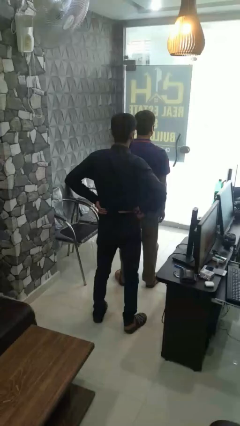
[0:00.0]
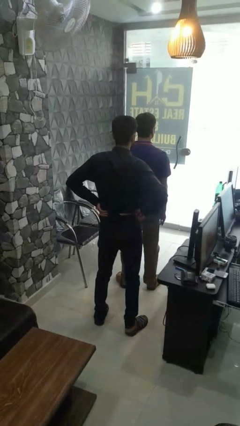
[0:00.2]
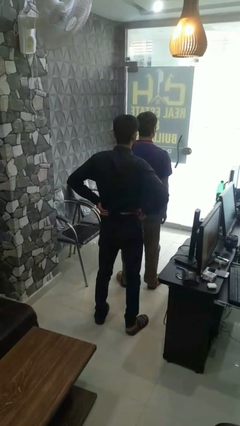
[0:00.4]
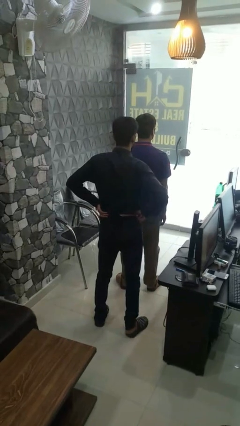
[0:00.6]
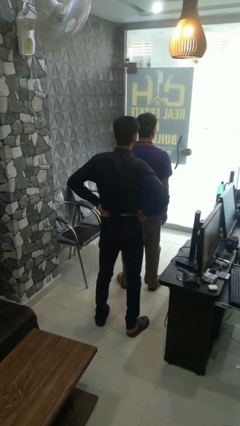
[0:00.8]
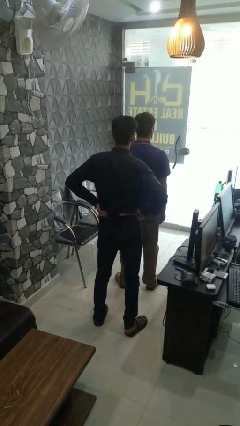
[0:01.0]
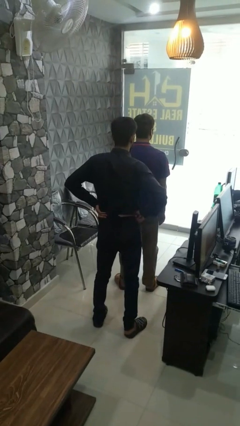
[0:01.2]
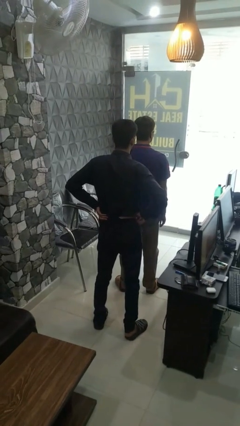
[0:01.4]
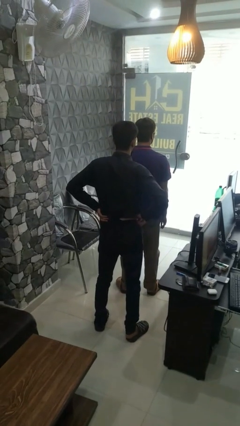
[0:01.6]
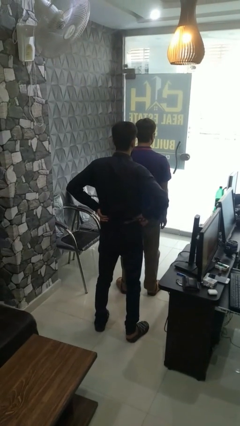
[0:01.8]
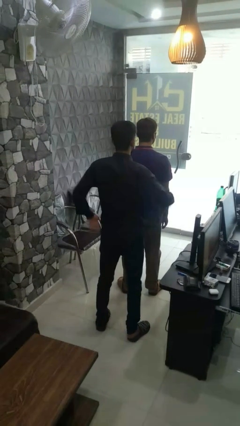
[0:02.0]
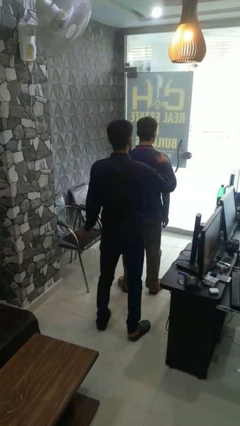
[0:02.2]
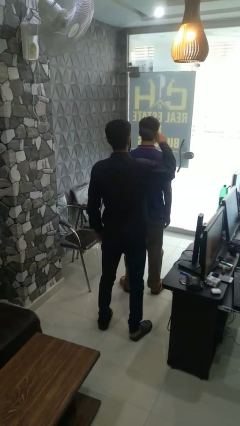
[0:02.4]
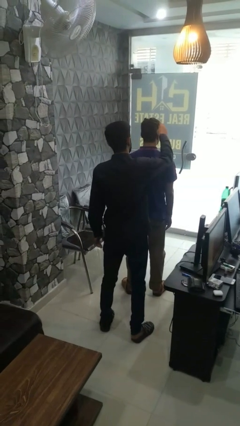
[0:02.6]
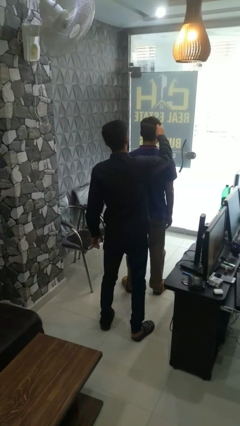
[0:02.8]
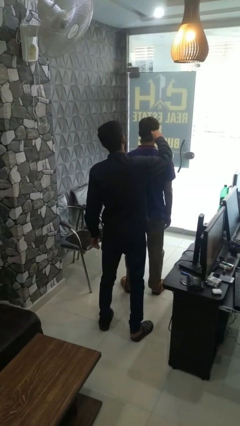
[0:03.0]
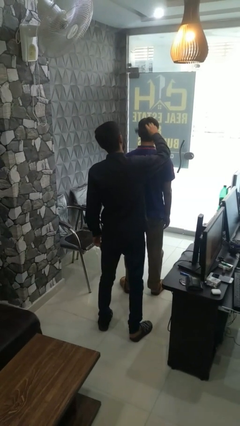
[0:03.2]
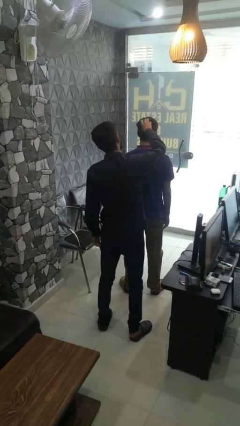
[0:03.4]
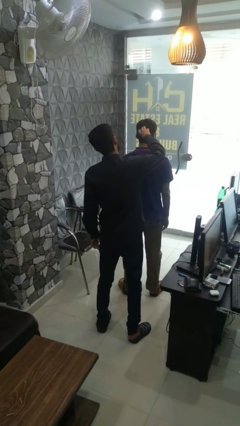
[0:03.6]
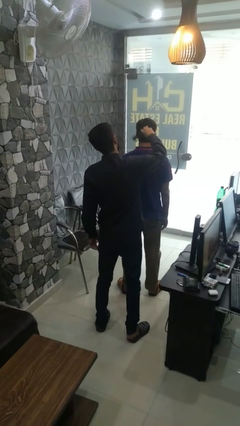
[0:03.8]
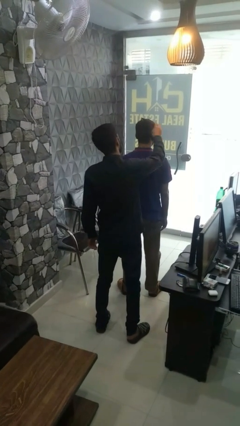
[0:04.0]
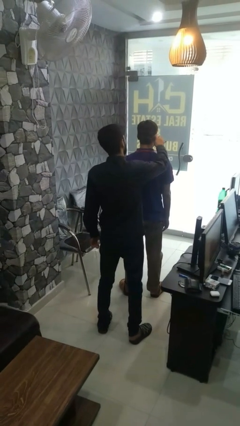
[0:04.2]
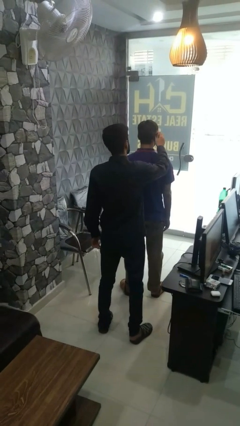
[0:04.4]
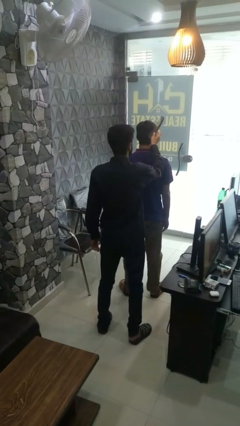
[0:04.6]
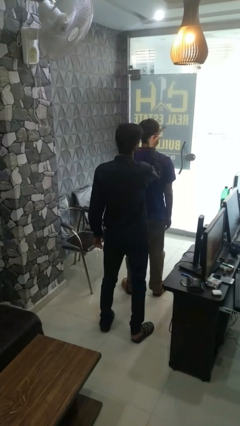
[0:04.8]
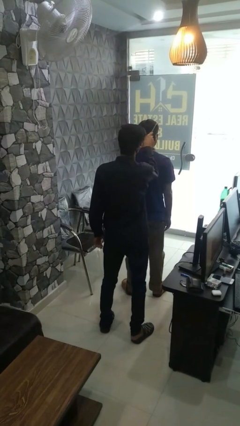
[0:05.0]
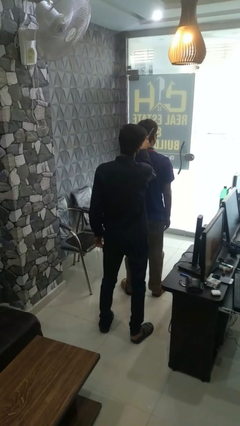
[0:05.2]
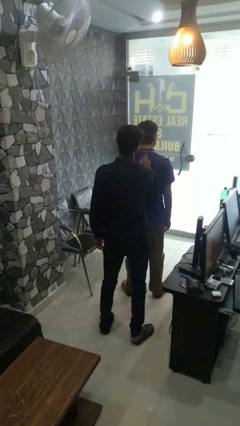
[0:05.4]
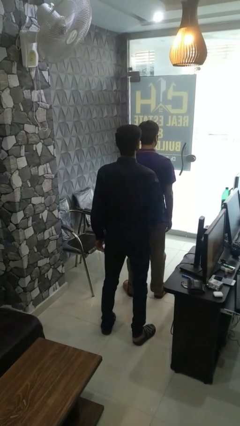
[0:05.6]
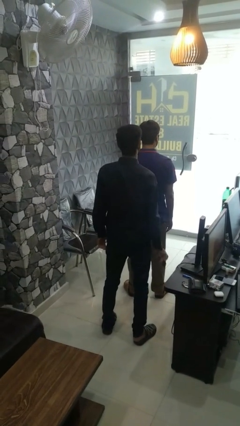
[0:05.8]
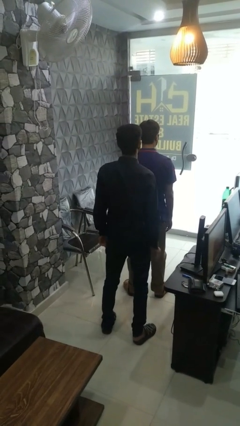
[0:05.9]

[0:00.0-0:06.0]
person brushes hair of person

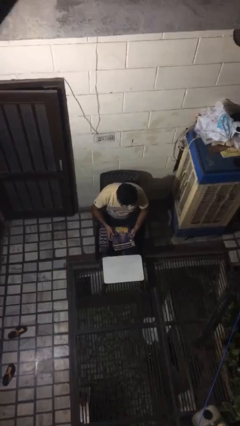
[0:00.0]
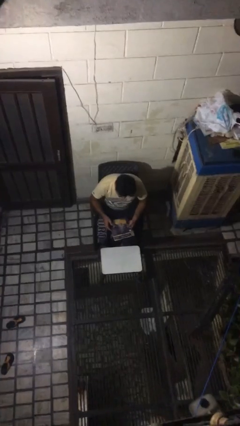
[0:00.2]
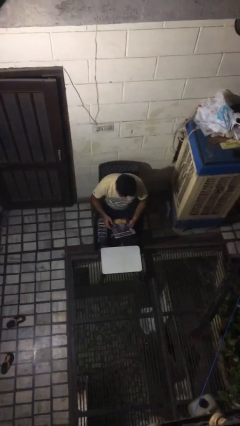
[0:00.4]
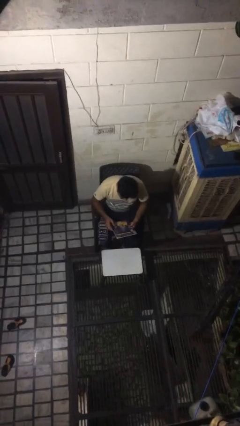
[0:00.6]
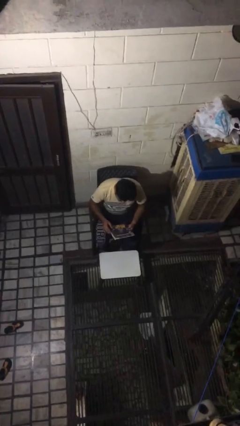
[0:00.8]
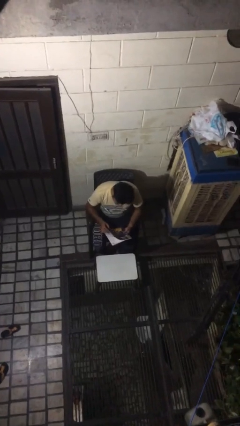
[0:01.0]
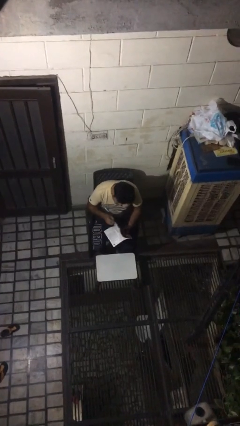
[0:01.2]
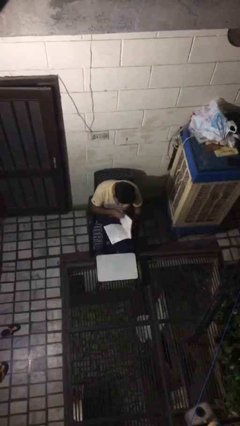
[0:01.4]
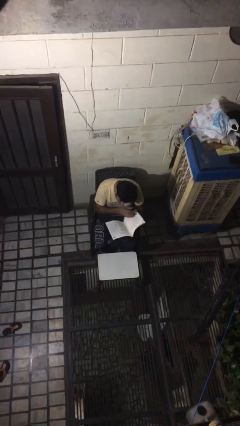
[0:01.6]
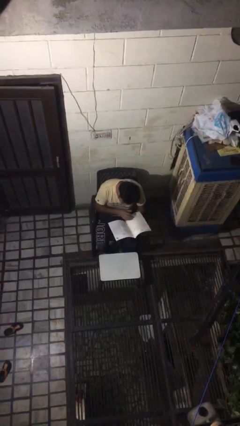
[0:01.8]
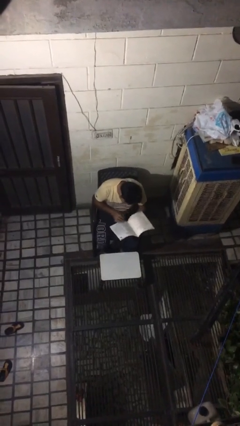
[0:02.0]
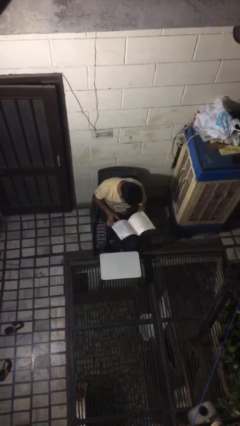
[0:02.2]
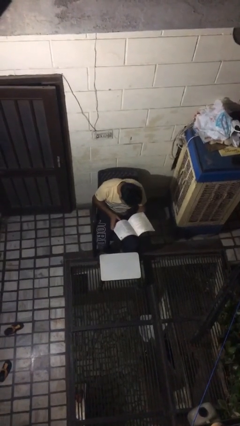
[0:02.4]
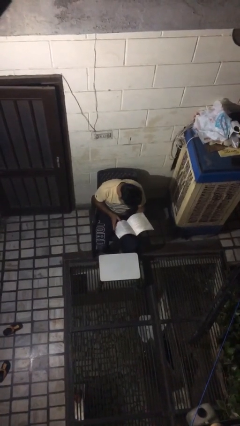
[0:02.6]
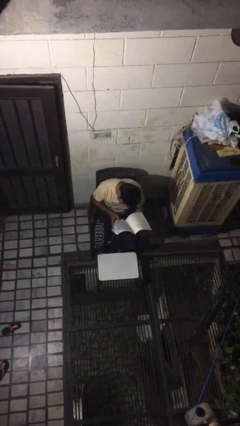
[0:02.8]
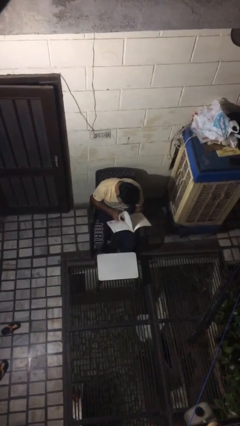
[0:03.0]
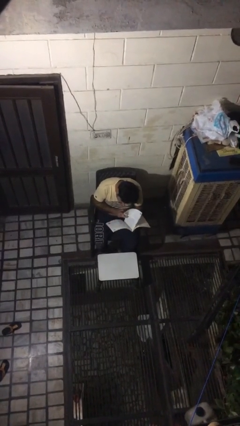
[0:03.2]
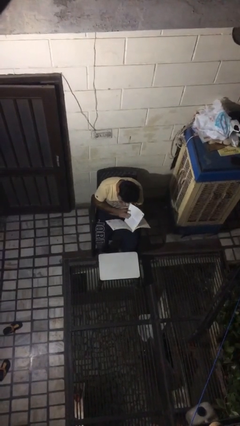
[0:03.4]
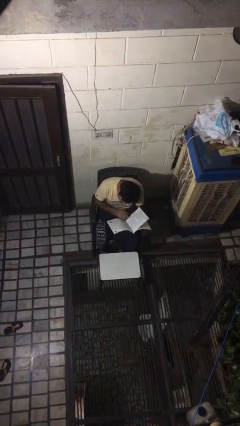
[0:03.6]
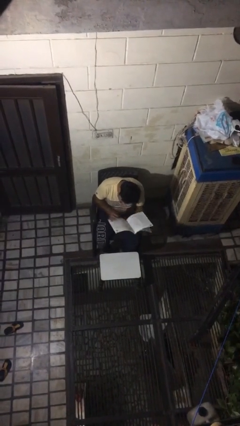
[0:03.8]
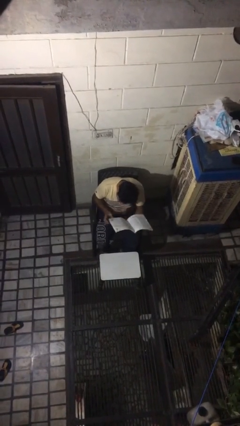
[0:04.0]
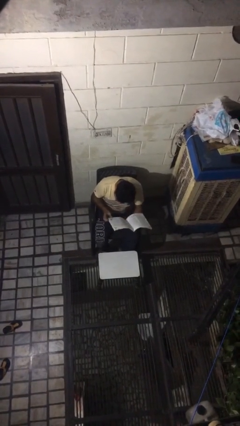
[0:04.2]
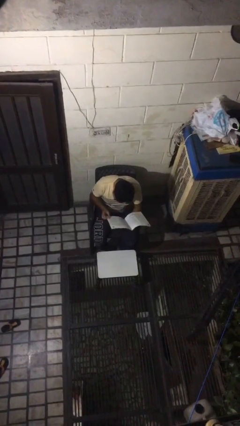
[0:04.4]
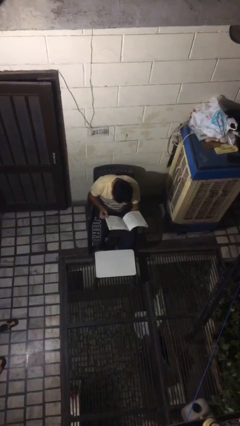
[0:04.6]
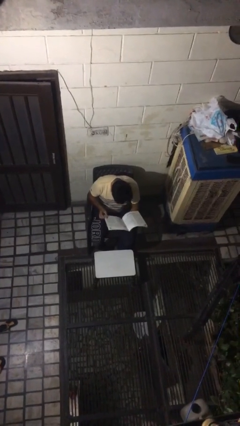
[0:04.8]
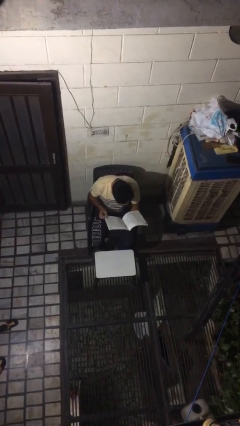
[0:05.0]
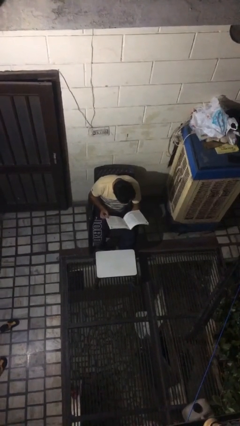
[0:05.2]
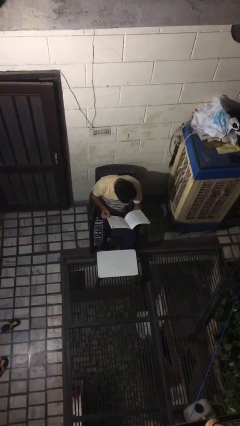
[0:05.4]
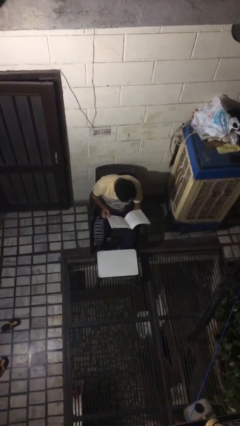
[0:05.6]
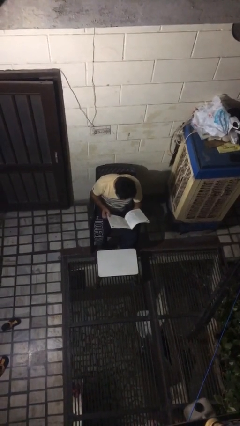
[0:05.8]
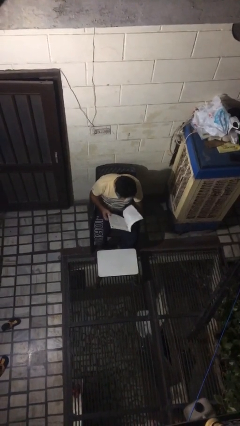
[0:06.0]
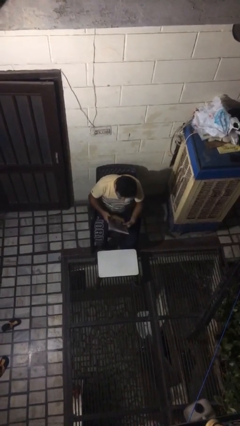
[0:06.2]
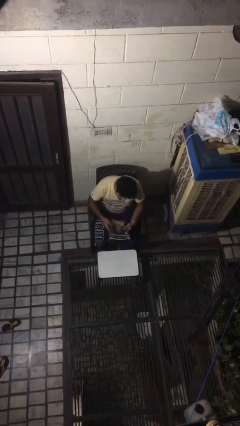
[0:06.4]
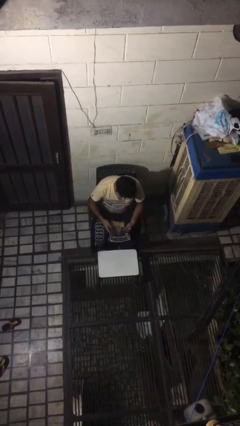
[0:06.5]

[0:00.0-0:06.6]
person reads magazine

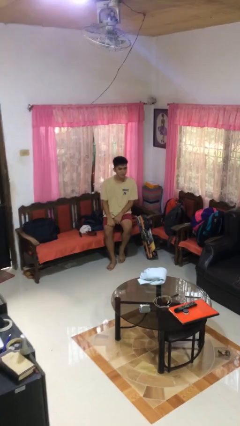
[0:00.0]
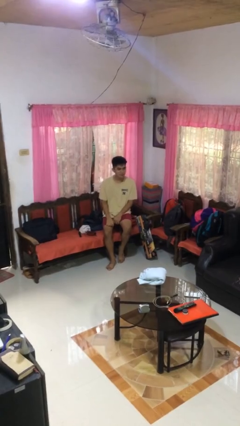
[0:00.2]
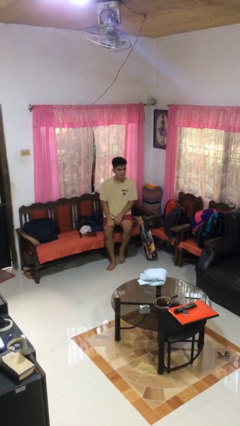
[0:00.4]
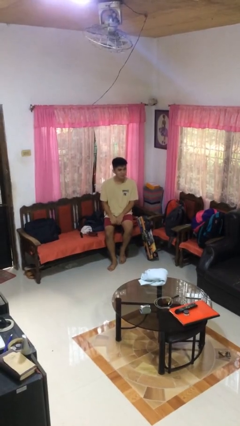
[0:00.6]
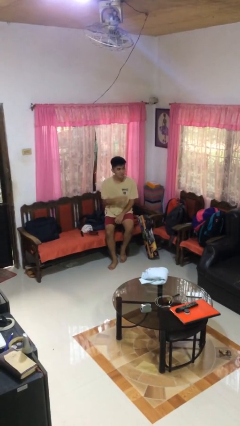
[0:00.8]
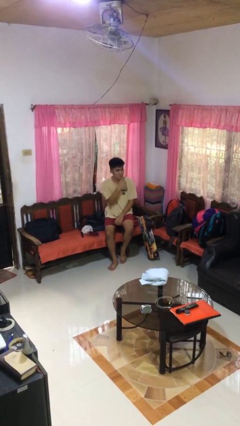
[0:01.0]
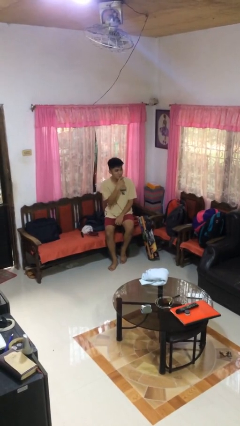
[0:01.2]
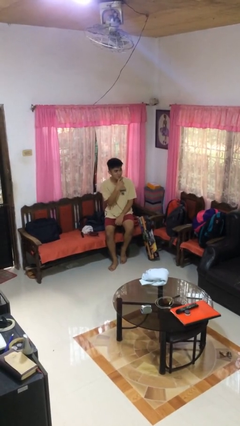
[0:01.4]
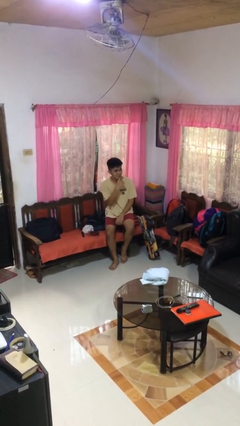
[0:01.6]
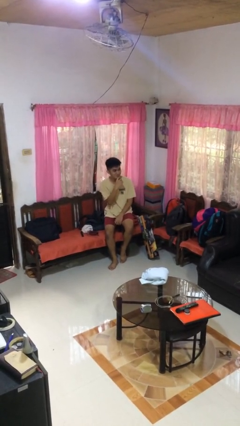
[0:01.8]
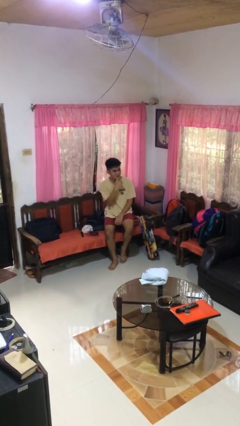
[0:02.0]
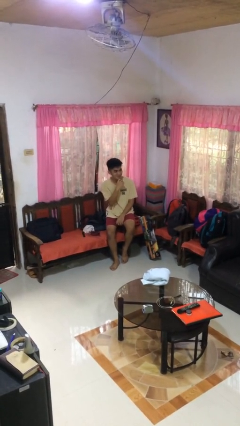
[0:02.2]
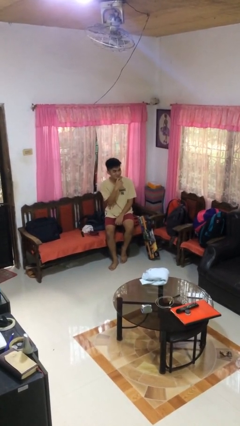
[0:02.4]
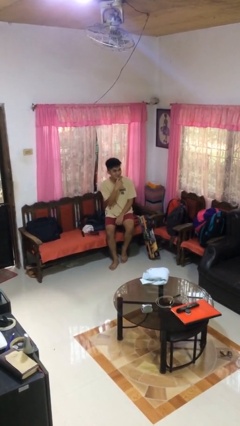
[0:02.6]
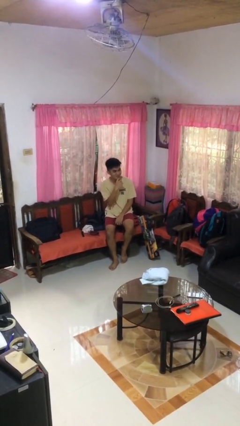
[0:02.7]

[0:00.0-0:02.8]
person strokes chin

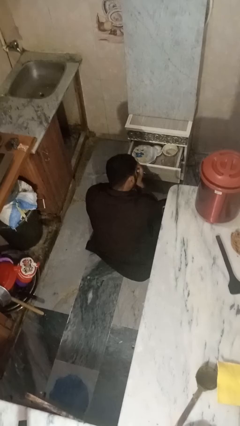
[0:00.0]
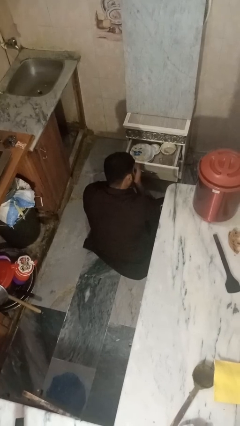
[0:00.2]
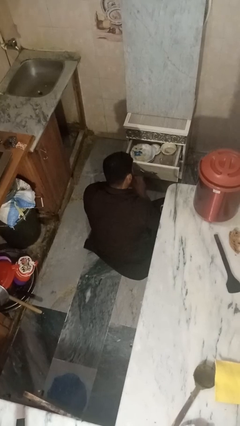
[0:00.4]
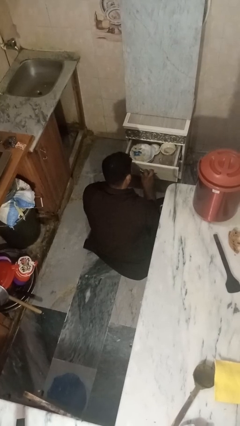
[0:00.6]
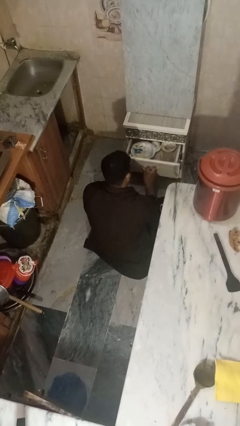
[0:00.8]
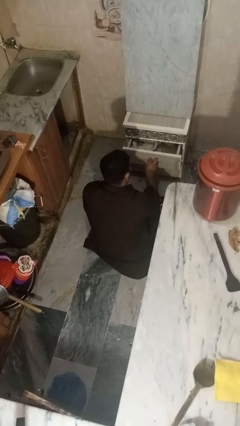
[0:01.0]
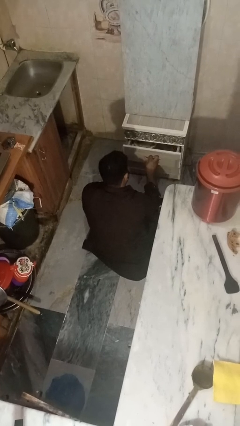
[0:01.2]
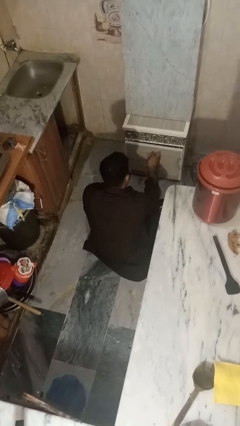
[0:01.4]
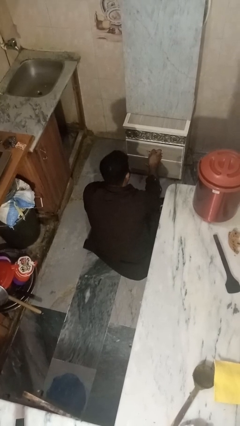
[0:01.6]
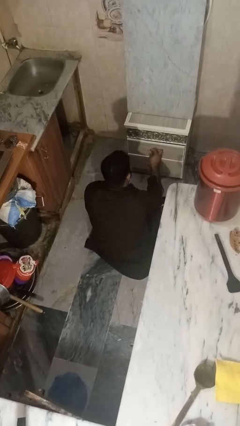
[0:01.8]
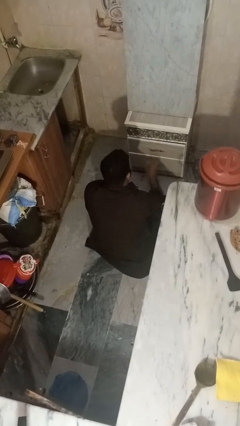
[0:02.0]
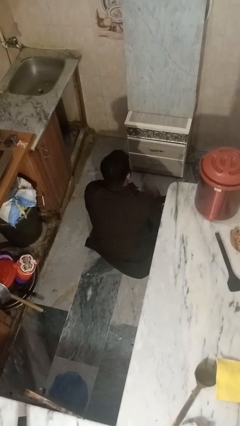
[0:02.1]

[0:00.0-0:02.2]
person closes kitchen drawer
